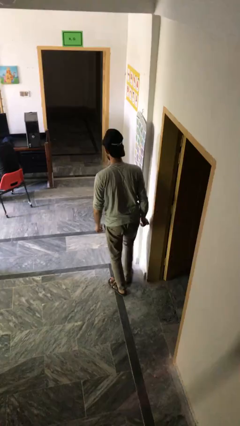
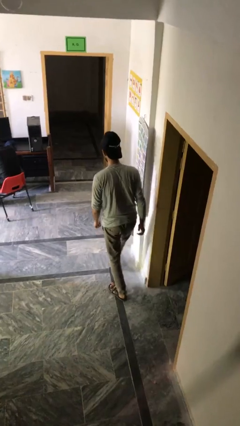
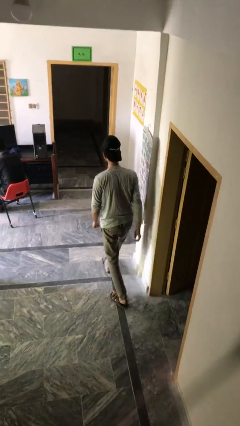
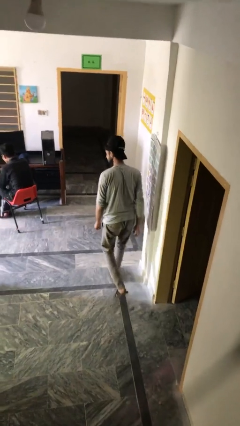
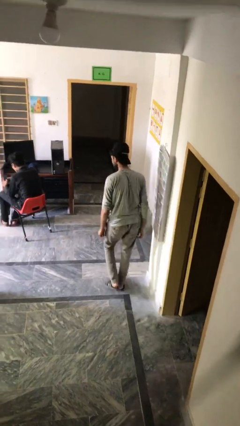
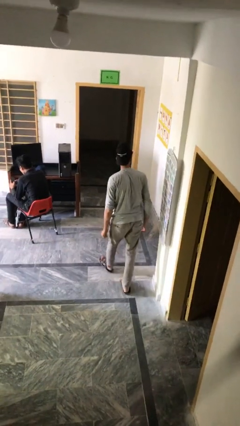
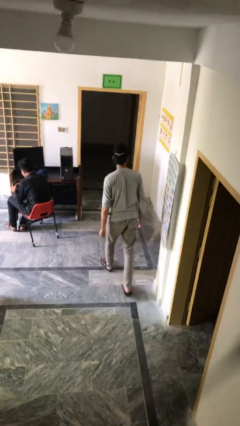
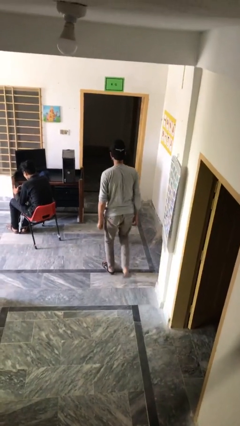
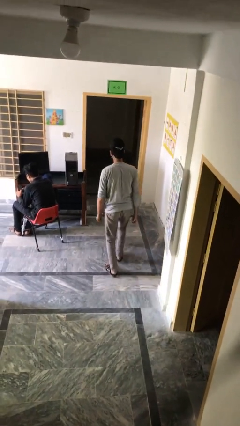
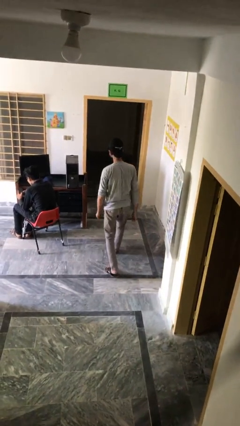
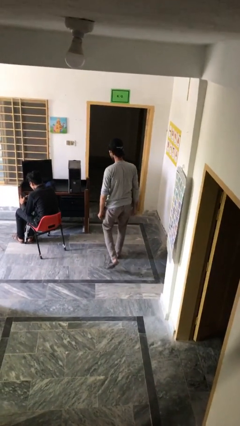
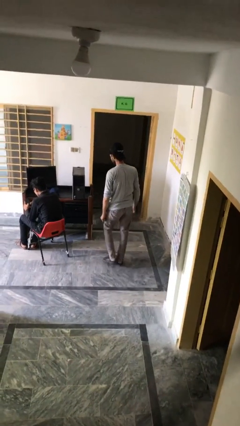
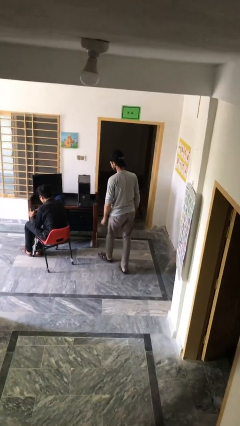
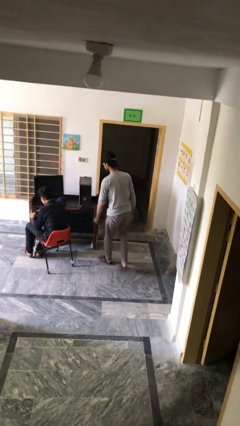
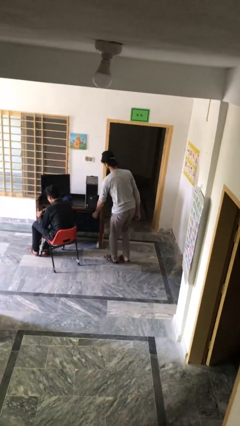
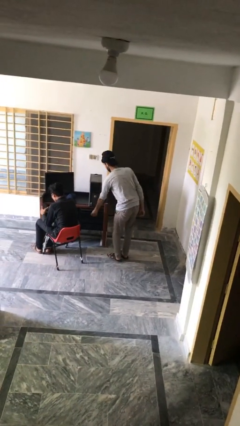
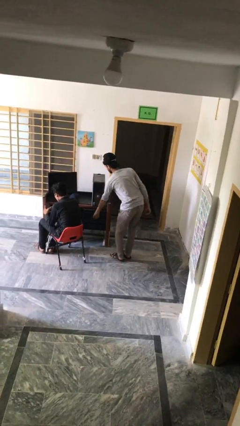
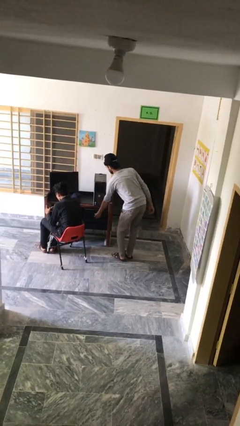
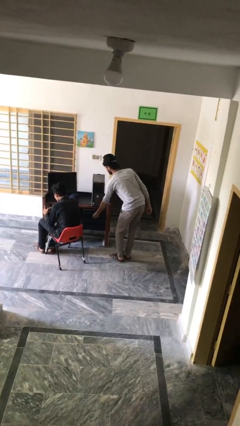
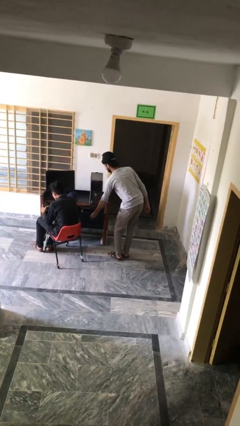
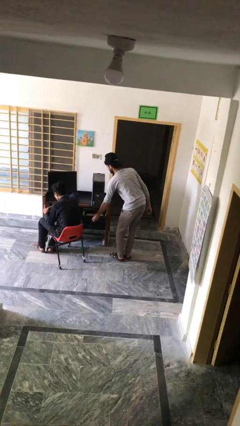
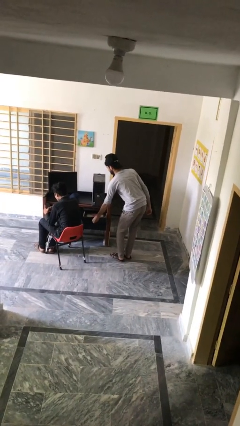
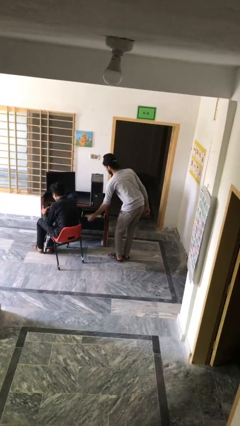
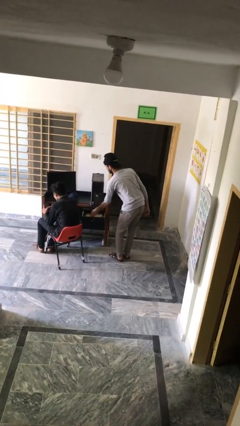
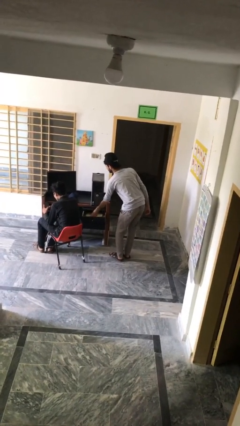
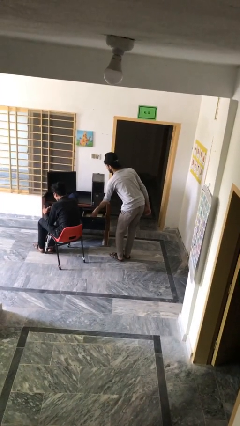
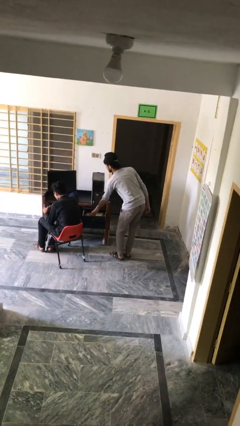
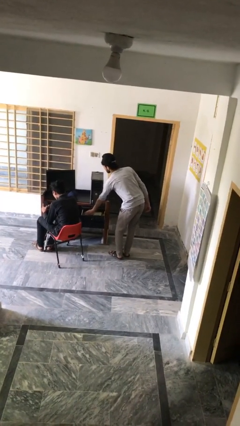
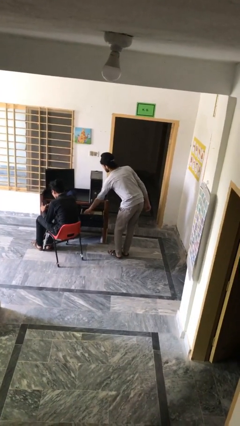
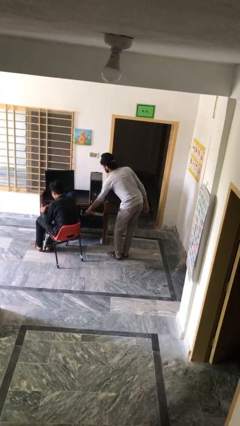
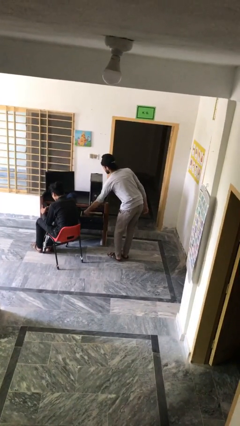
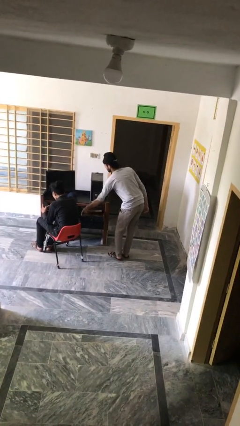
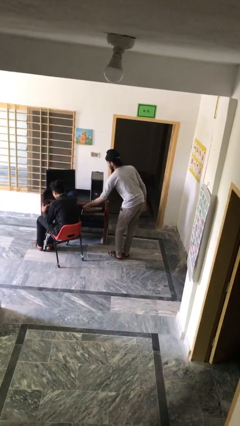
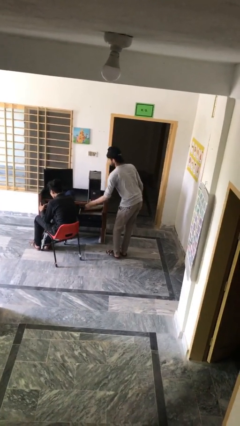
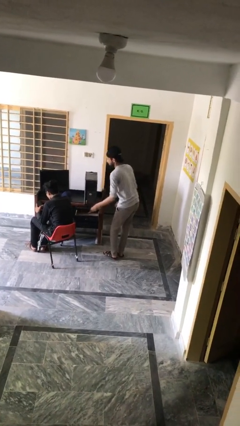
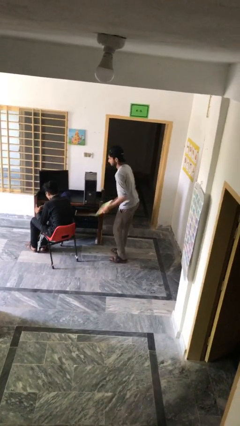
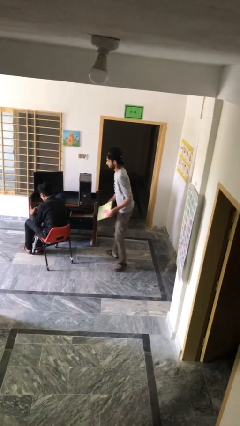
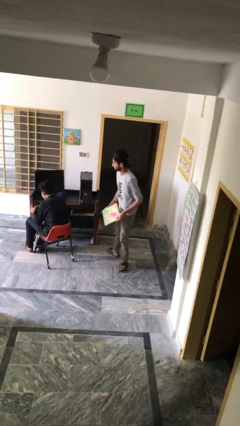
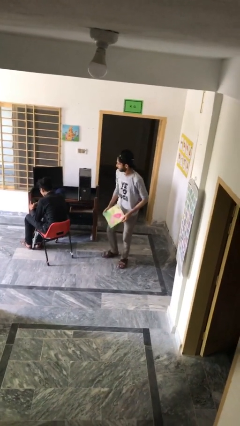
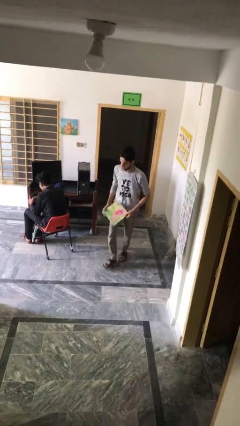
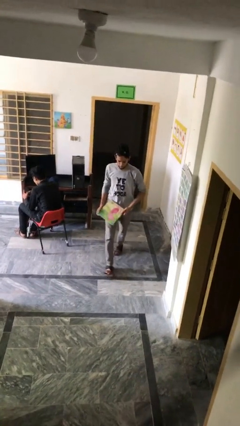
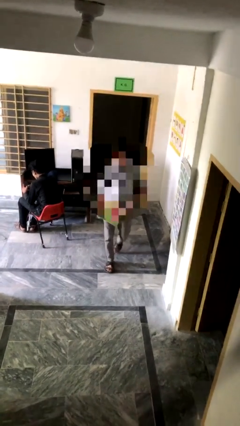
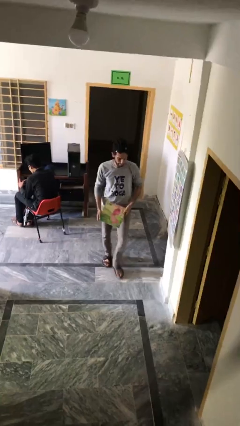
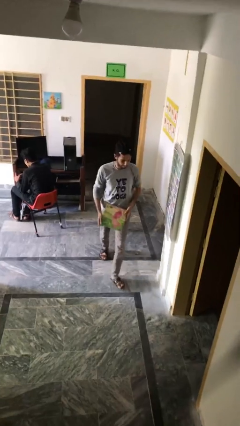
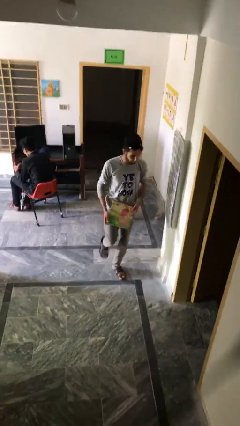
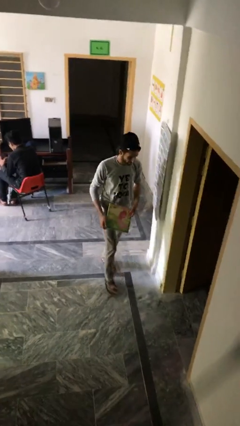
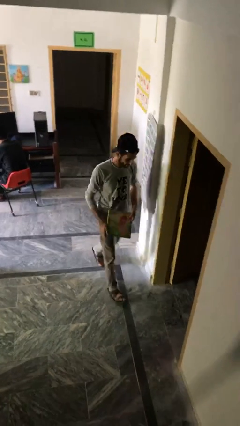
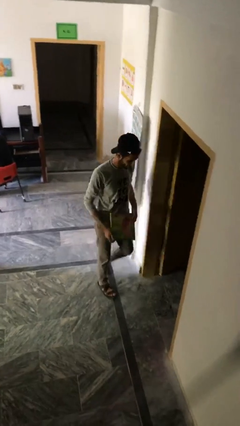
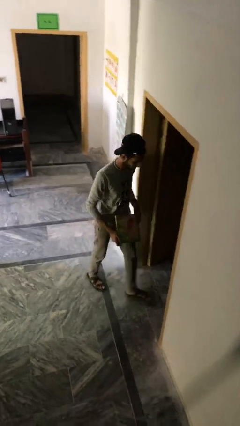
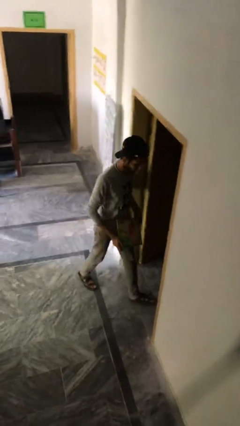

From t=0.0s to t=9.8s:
person steals object from person

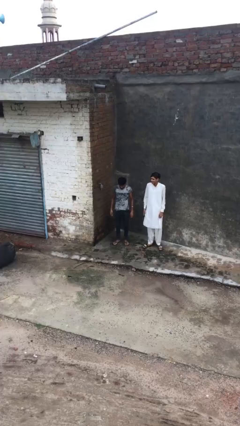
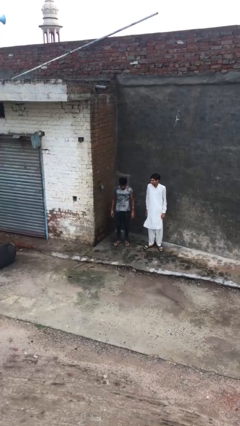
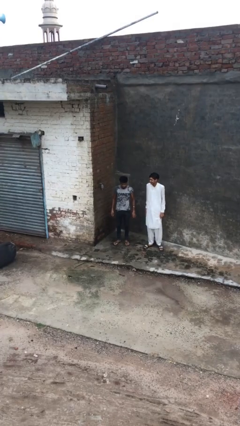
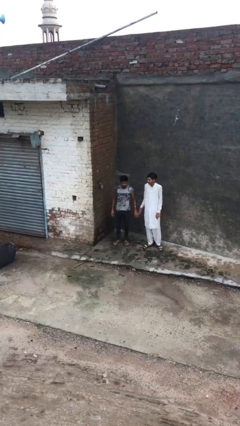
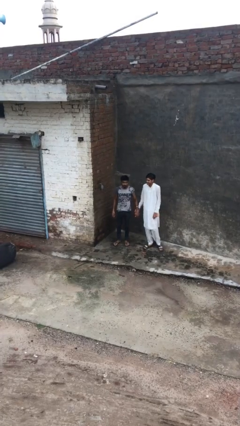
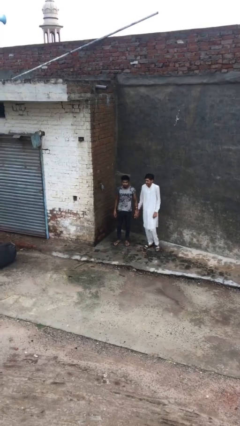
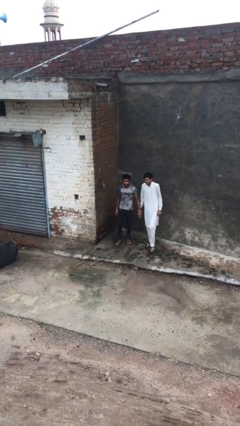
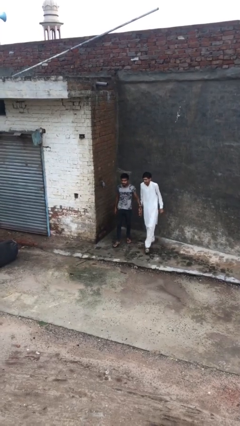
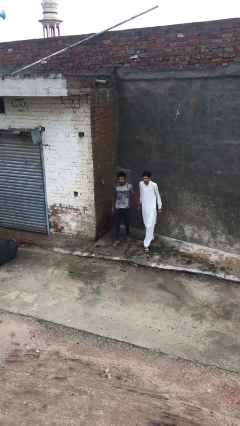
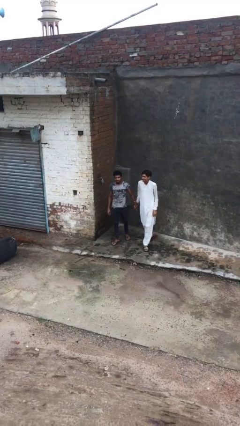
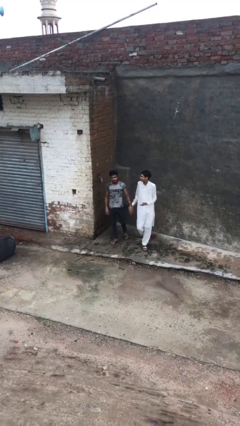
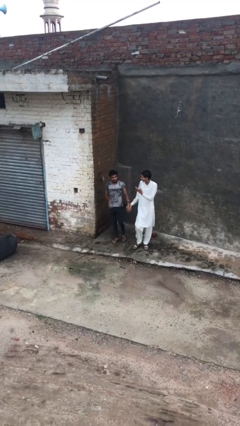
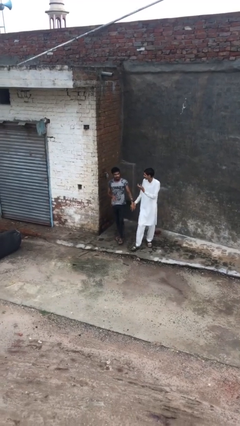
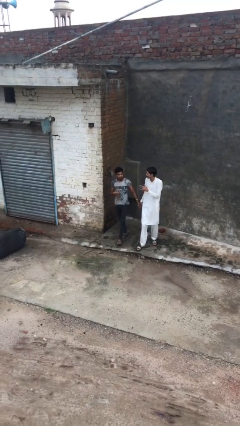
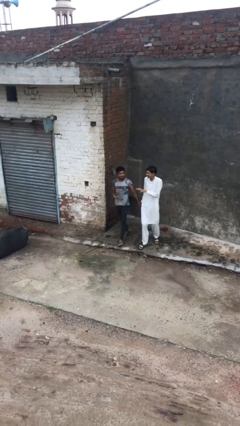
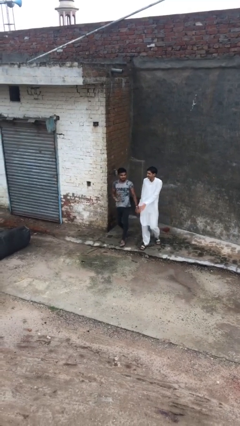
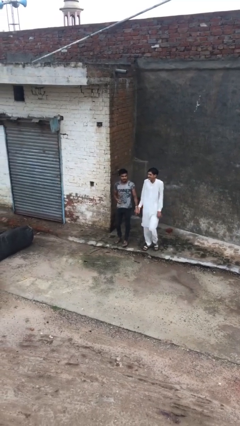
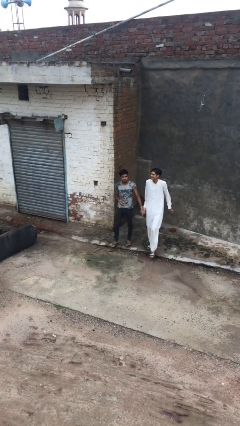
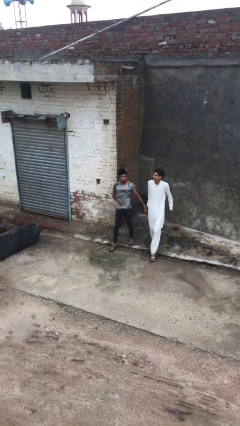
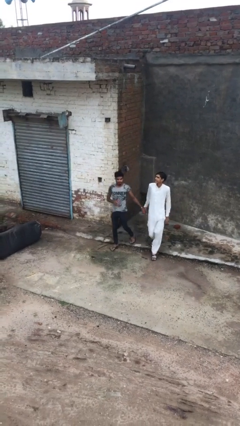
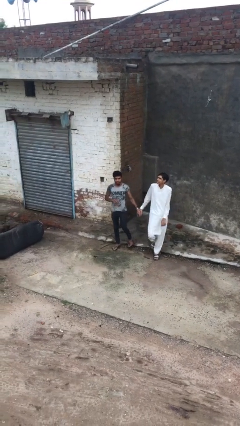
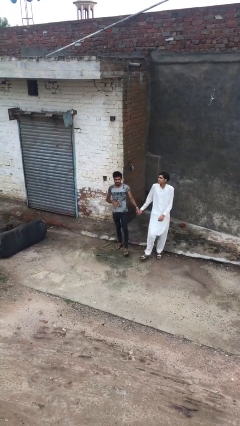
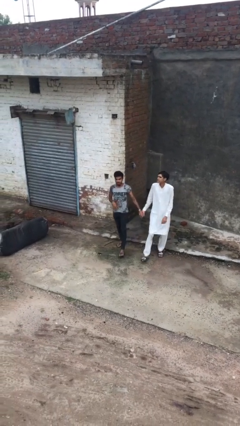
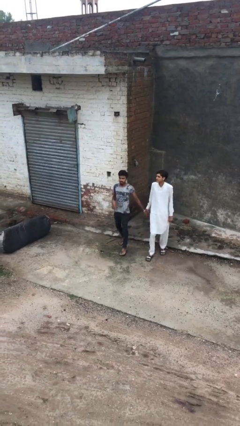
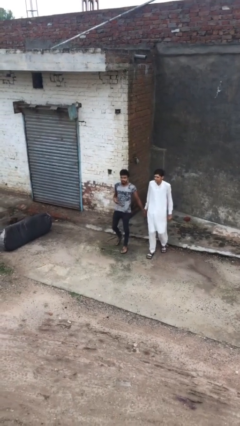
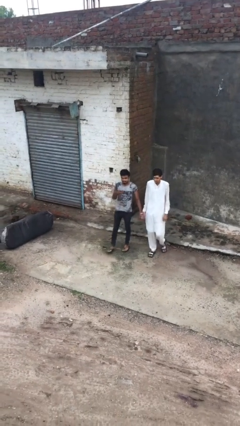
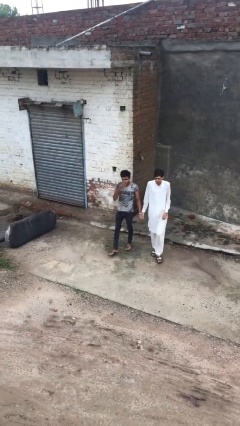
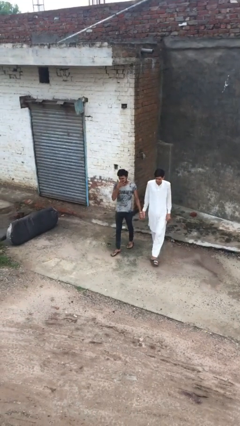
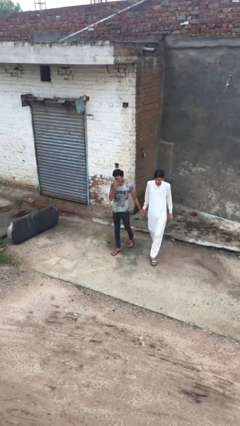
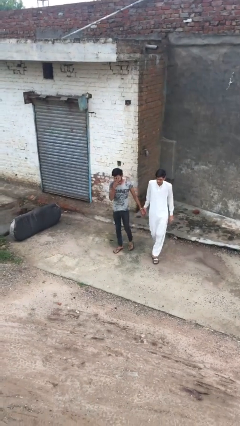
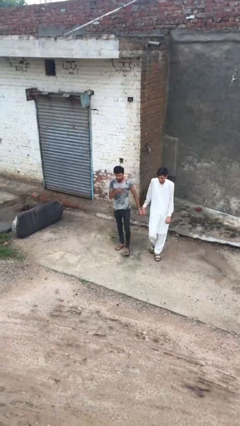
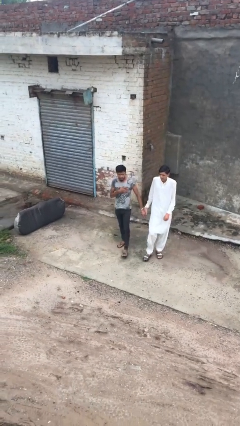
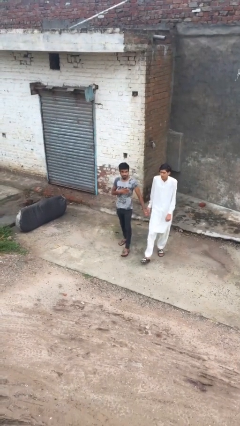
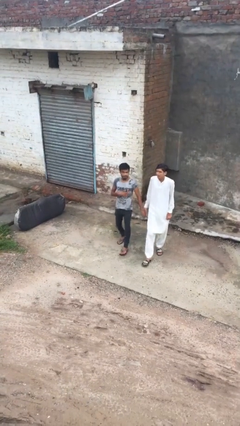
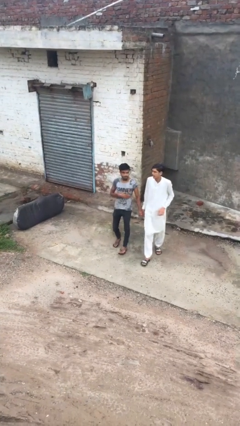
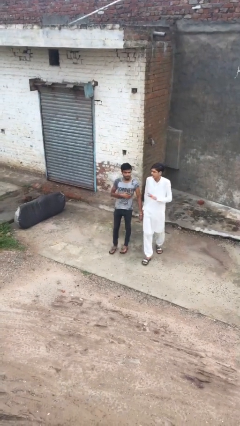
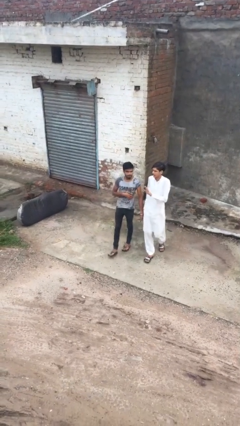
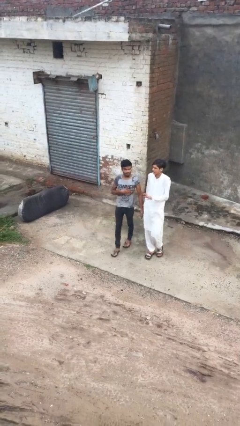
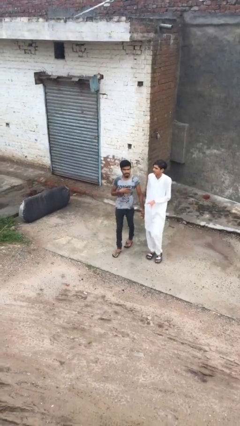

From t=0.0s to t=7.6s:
person holds hand

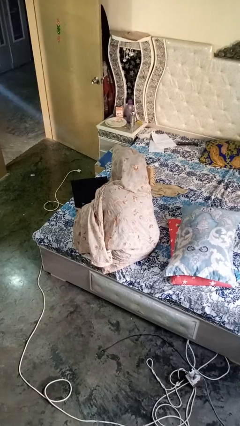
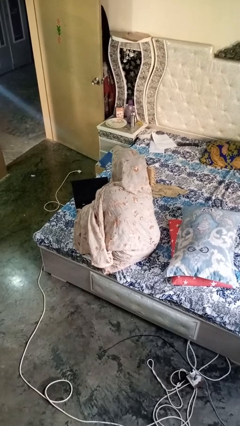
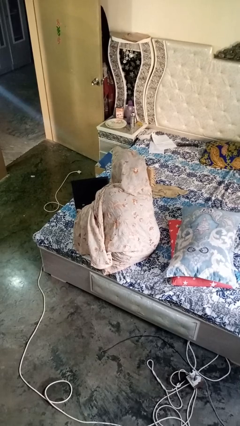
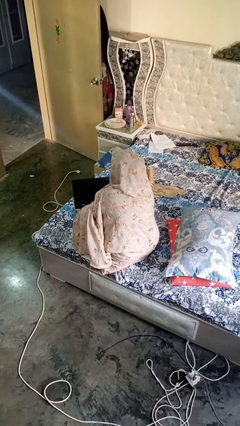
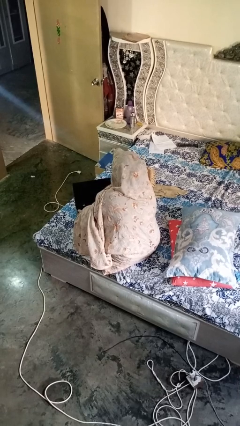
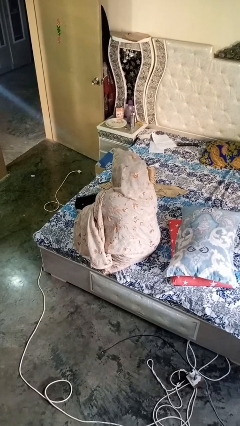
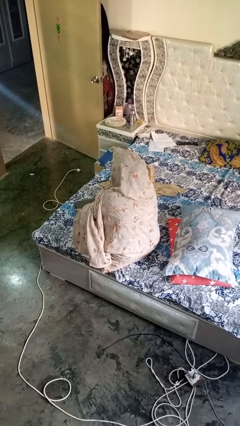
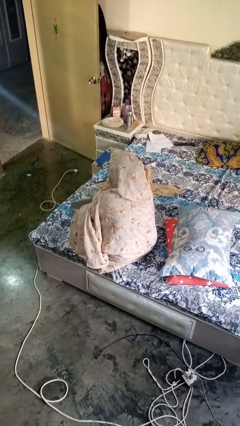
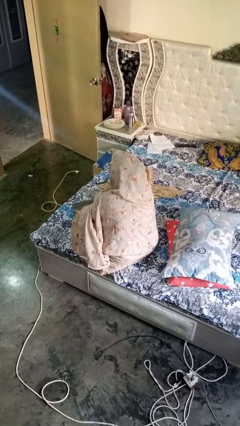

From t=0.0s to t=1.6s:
person closes laptop
